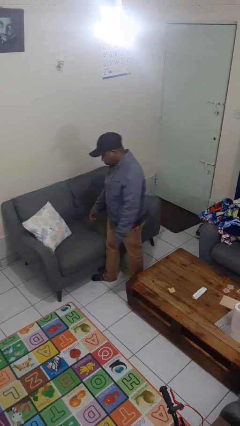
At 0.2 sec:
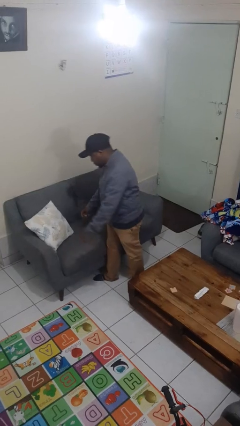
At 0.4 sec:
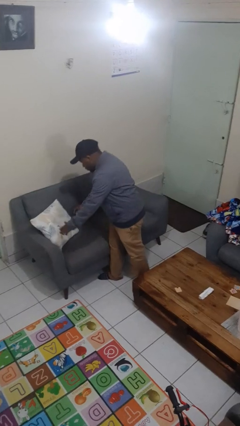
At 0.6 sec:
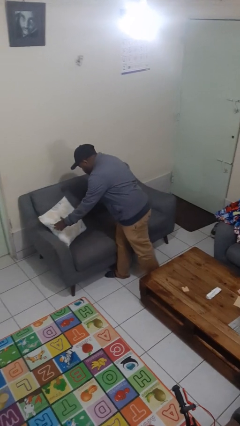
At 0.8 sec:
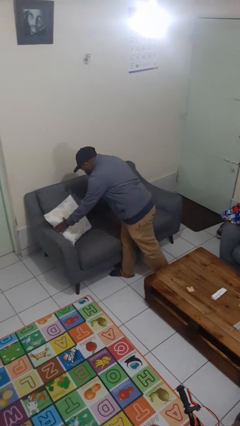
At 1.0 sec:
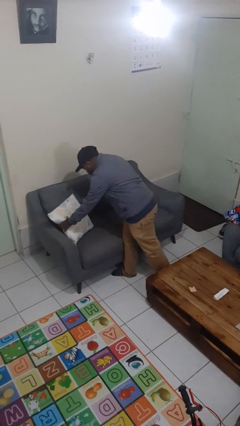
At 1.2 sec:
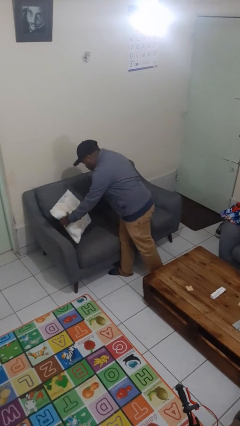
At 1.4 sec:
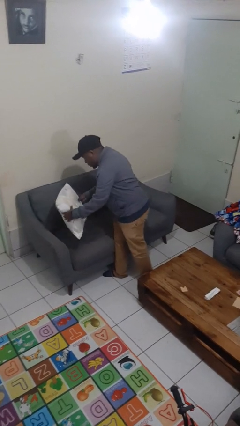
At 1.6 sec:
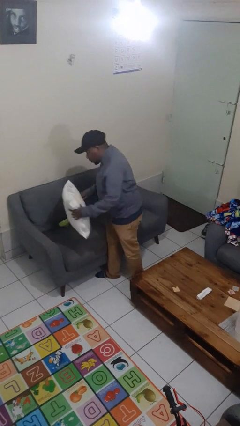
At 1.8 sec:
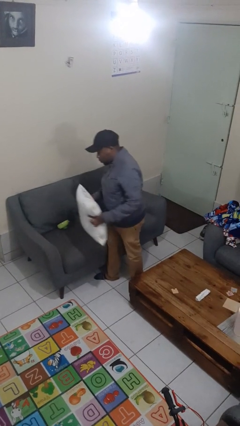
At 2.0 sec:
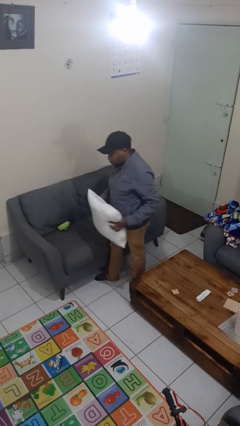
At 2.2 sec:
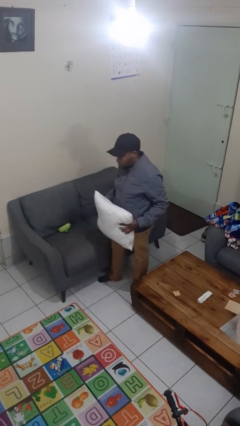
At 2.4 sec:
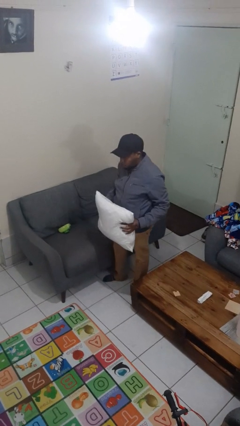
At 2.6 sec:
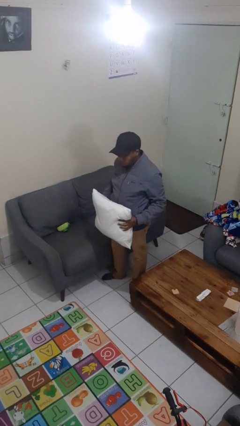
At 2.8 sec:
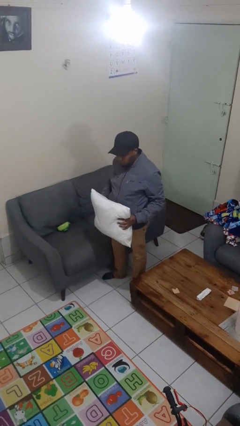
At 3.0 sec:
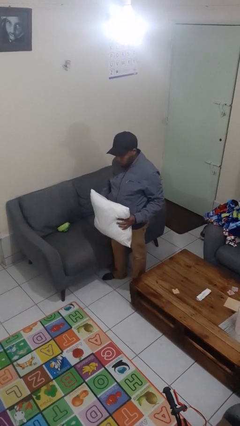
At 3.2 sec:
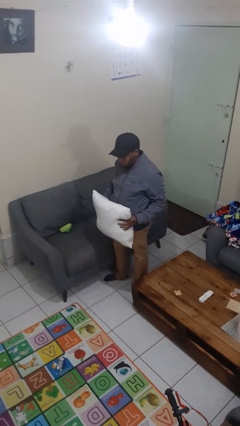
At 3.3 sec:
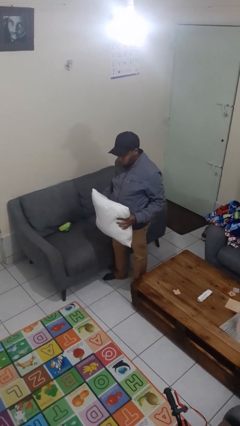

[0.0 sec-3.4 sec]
person picks up object from couch

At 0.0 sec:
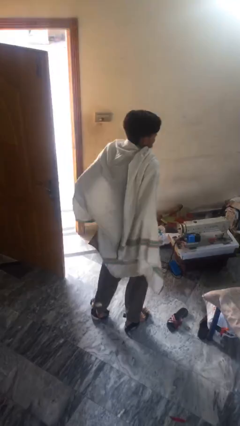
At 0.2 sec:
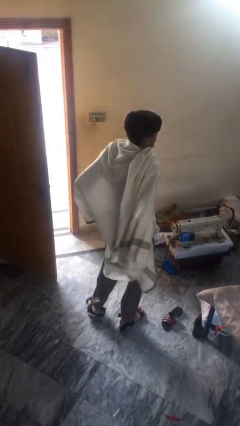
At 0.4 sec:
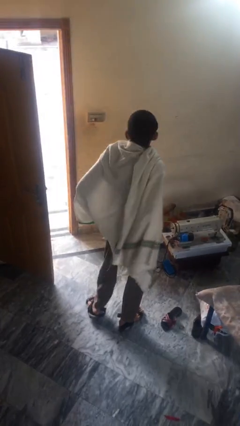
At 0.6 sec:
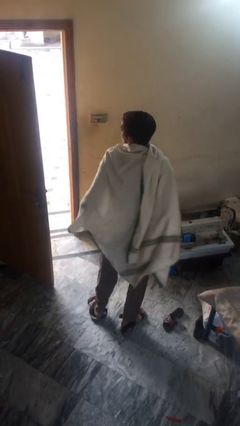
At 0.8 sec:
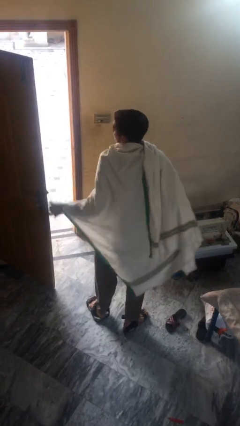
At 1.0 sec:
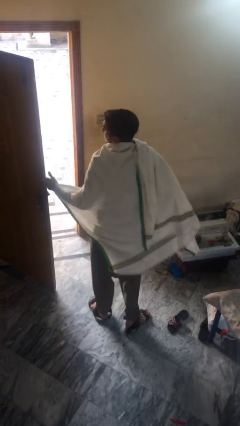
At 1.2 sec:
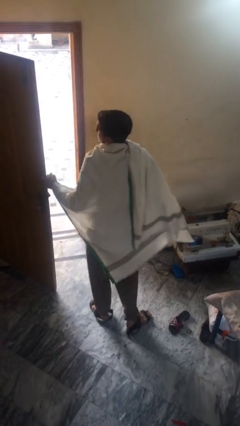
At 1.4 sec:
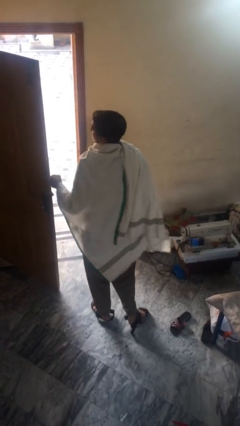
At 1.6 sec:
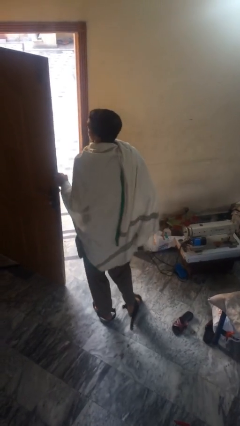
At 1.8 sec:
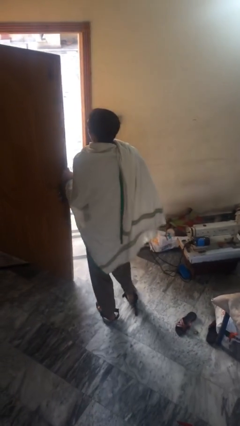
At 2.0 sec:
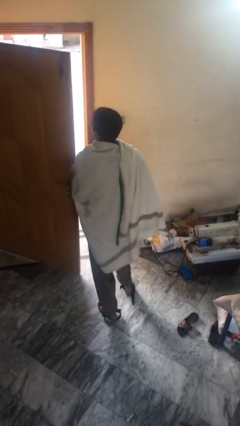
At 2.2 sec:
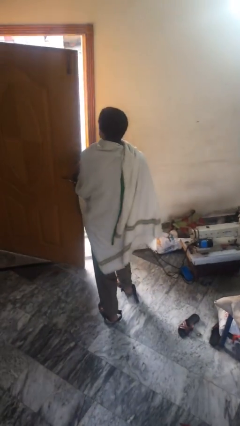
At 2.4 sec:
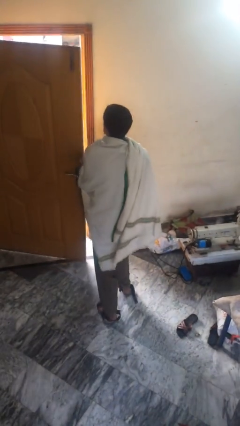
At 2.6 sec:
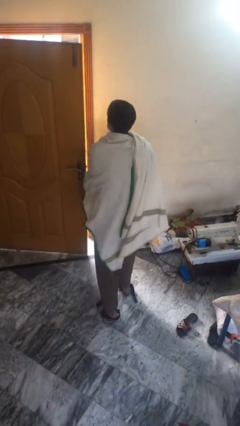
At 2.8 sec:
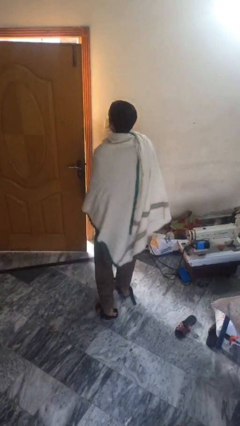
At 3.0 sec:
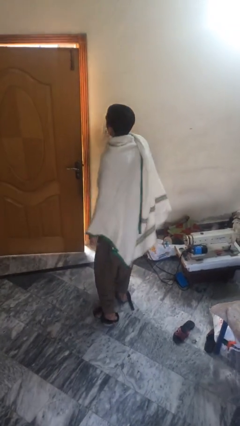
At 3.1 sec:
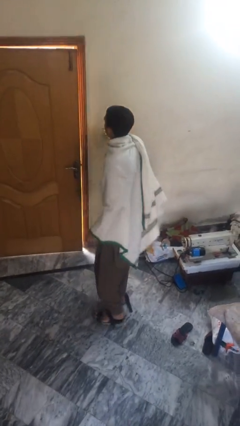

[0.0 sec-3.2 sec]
person closes facility door

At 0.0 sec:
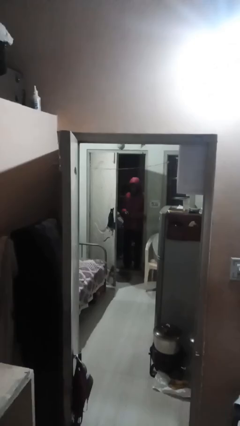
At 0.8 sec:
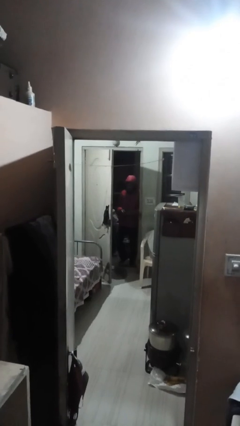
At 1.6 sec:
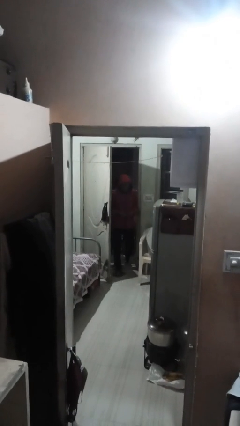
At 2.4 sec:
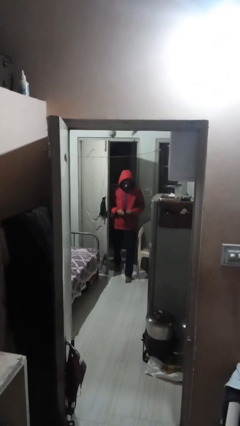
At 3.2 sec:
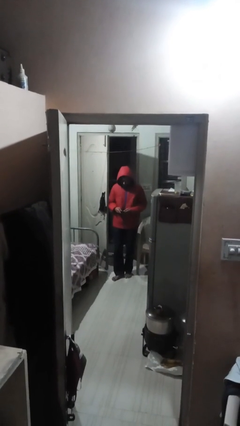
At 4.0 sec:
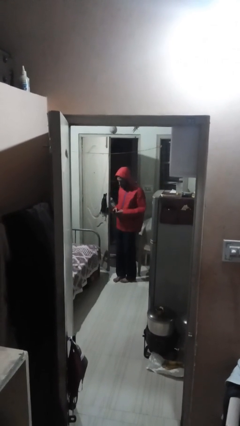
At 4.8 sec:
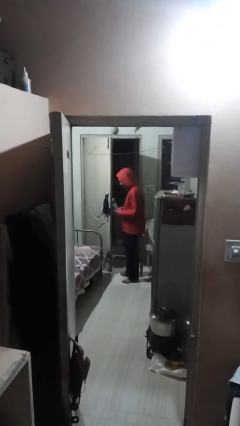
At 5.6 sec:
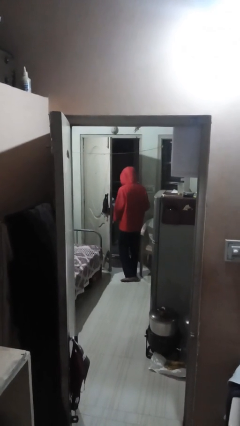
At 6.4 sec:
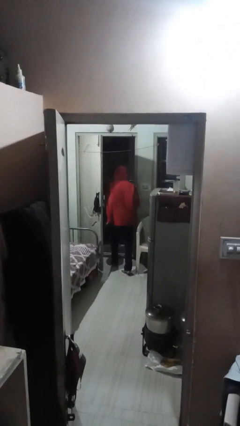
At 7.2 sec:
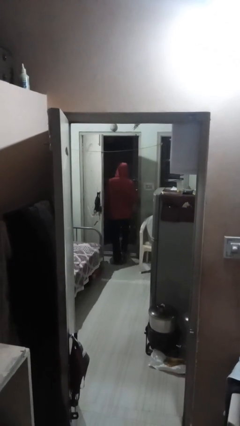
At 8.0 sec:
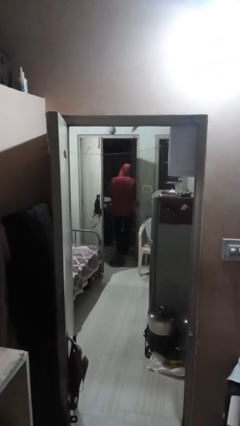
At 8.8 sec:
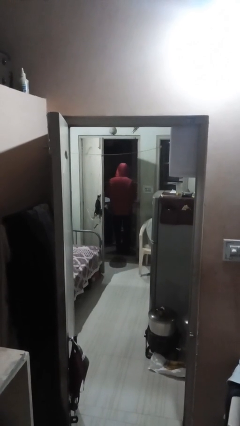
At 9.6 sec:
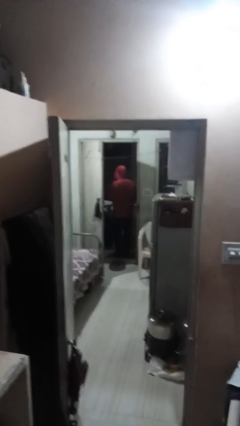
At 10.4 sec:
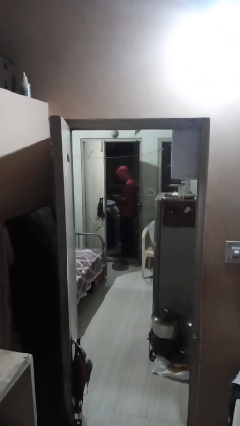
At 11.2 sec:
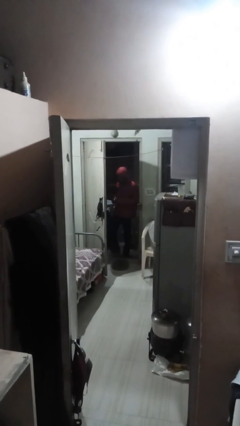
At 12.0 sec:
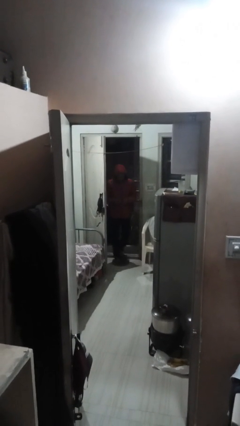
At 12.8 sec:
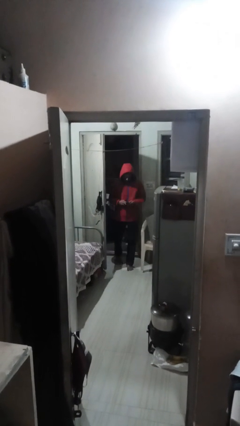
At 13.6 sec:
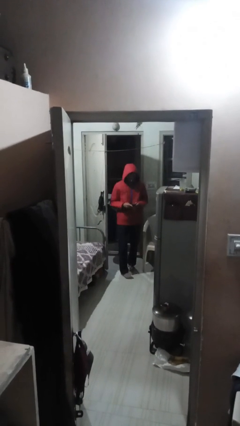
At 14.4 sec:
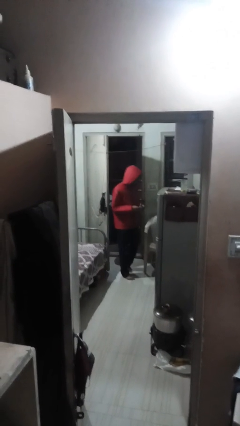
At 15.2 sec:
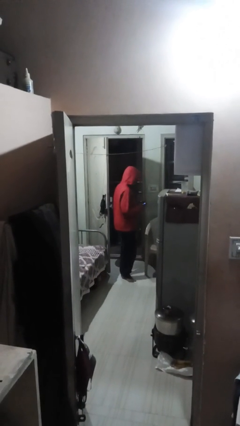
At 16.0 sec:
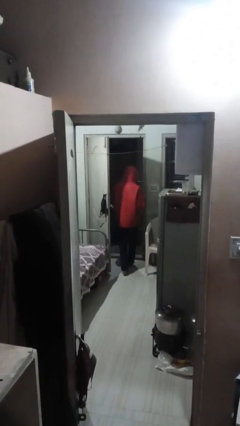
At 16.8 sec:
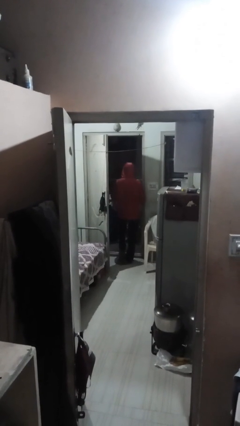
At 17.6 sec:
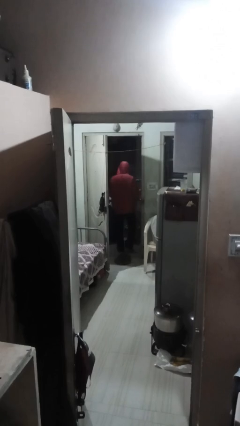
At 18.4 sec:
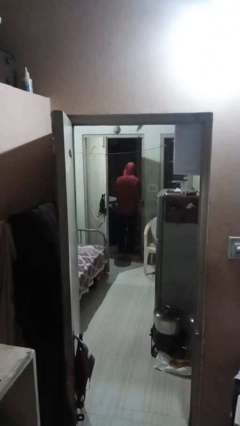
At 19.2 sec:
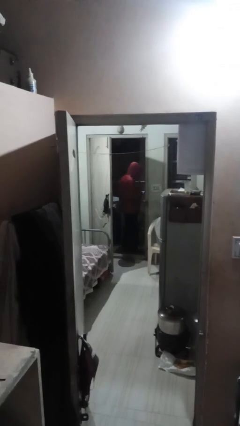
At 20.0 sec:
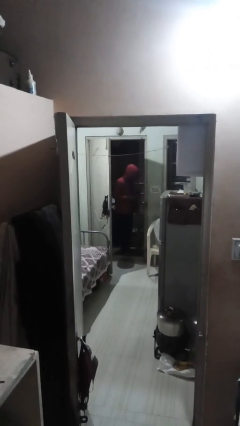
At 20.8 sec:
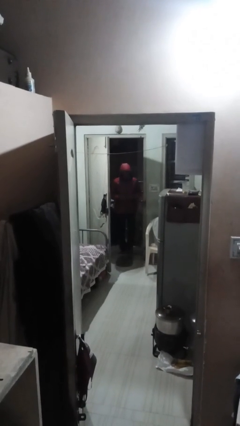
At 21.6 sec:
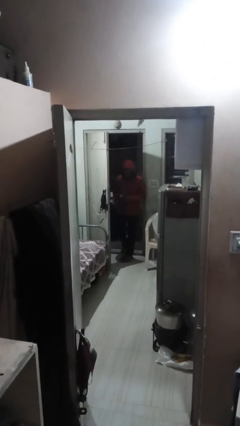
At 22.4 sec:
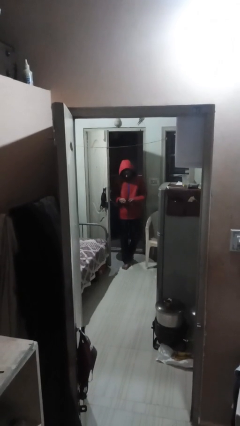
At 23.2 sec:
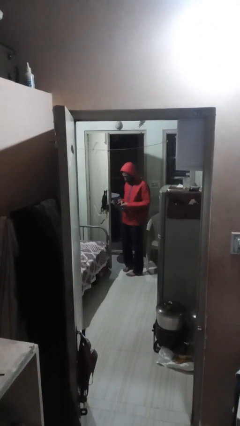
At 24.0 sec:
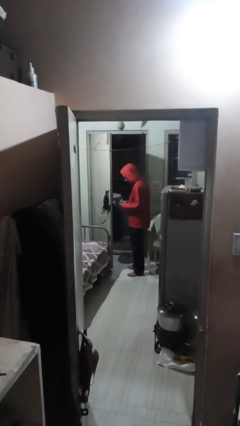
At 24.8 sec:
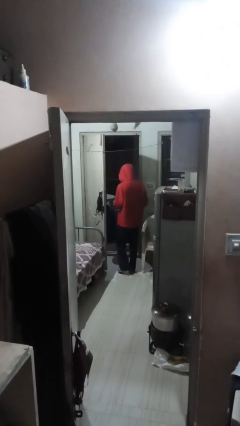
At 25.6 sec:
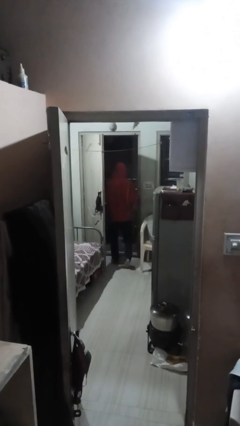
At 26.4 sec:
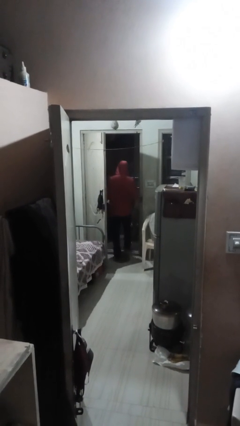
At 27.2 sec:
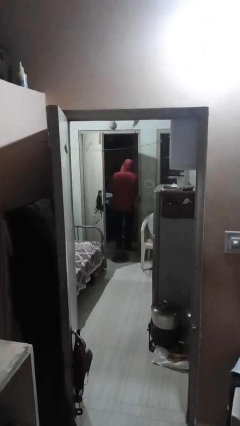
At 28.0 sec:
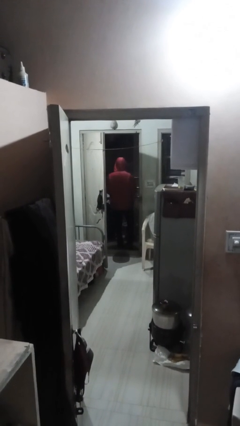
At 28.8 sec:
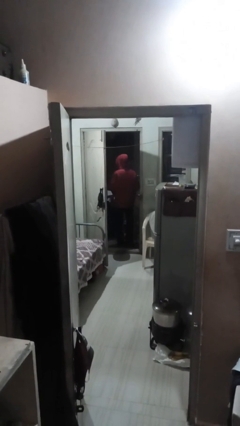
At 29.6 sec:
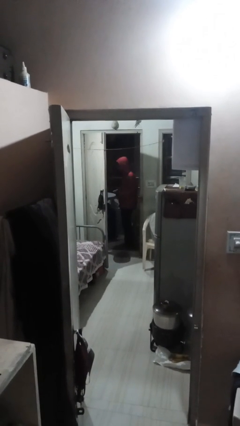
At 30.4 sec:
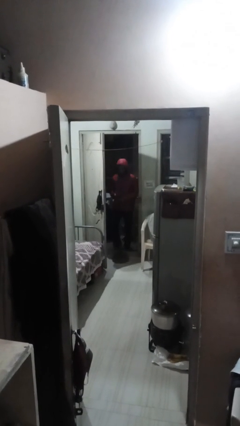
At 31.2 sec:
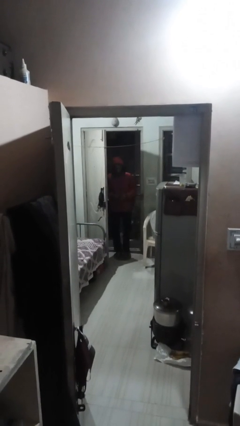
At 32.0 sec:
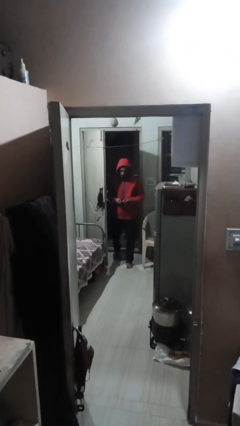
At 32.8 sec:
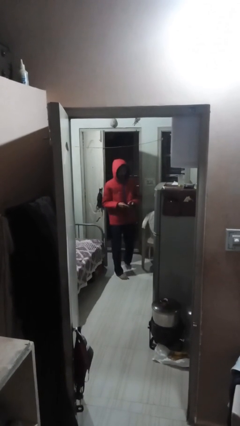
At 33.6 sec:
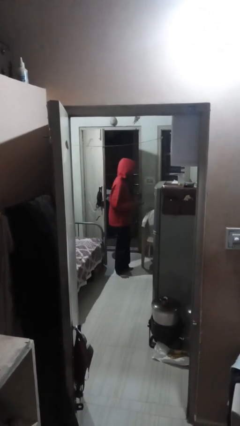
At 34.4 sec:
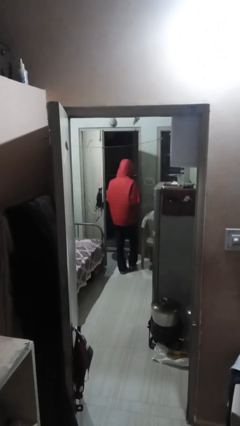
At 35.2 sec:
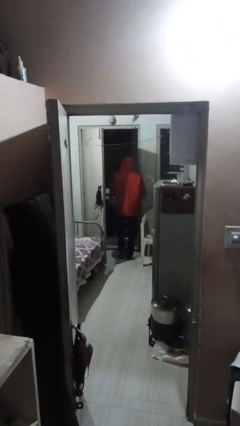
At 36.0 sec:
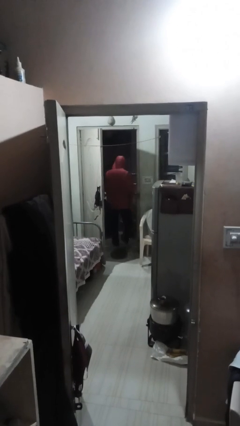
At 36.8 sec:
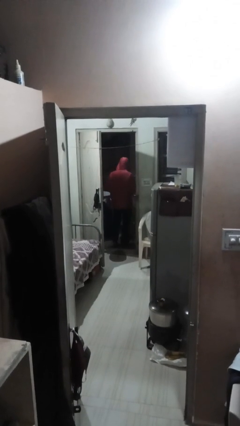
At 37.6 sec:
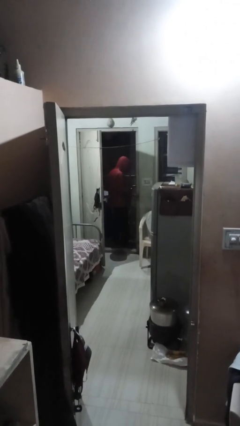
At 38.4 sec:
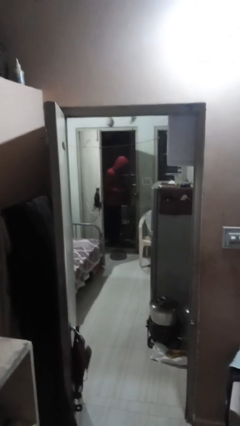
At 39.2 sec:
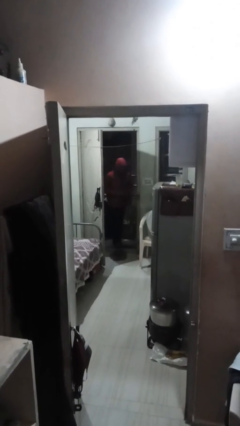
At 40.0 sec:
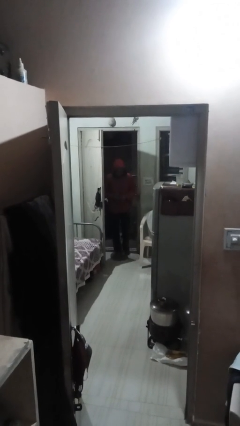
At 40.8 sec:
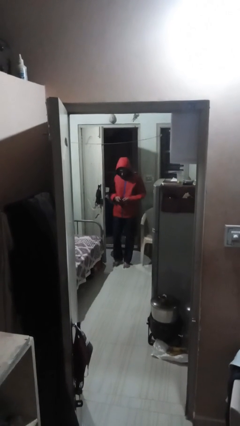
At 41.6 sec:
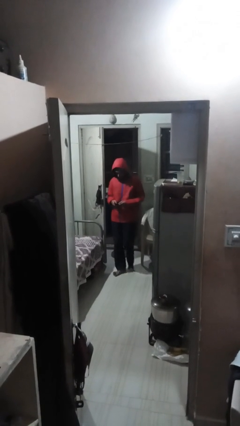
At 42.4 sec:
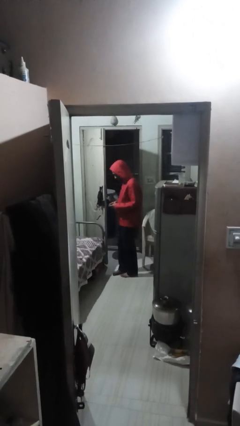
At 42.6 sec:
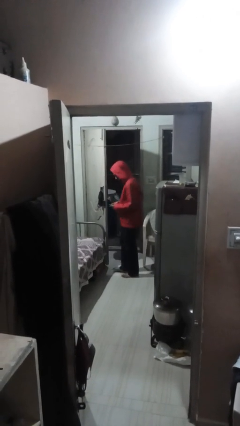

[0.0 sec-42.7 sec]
person texts on phone

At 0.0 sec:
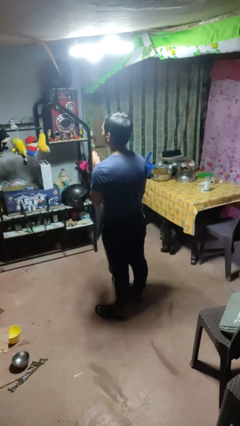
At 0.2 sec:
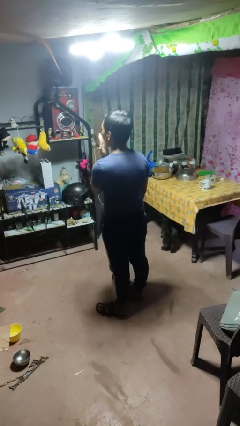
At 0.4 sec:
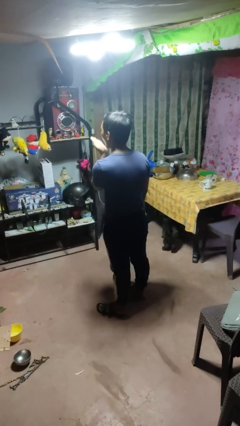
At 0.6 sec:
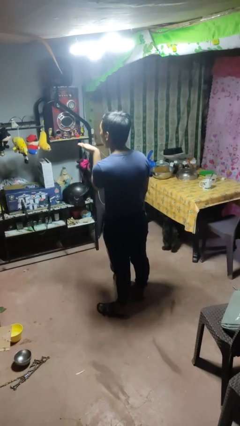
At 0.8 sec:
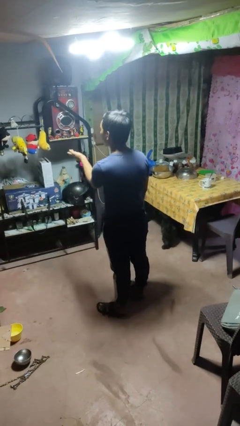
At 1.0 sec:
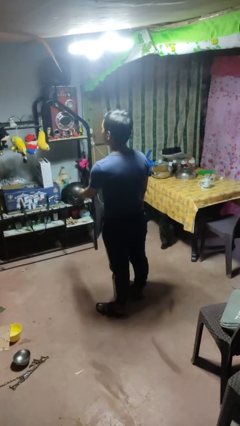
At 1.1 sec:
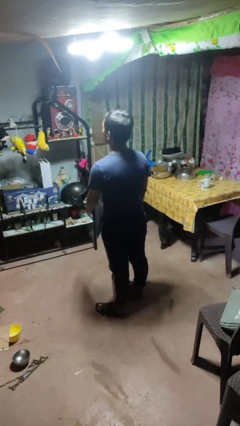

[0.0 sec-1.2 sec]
person gestures blow kiss
